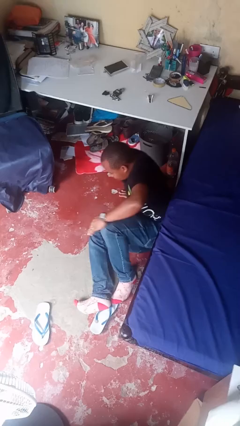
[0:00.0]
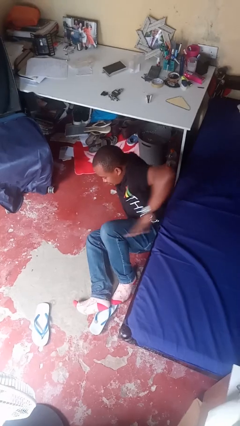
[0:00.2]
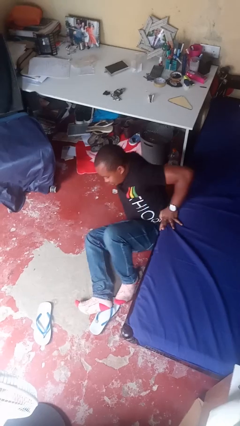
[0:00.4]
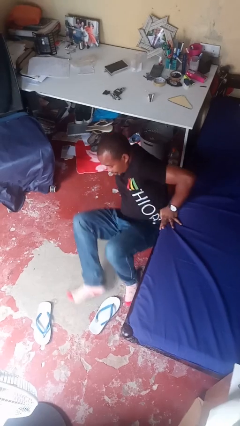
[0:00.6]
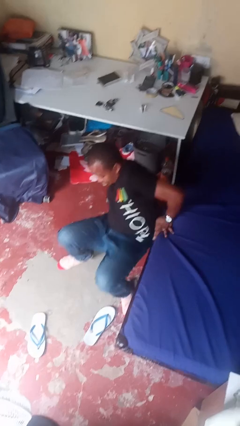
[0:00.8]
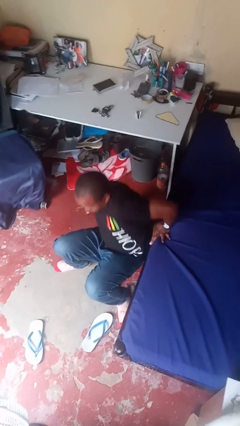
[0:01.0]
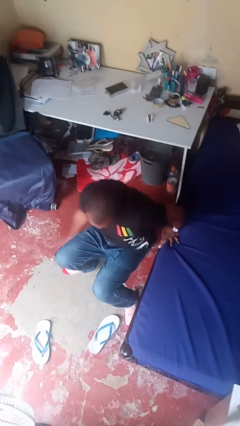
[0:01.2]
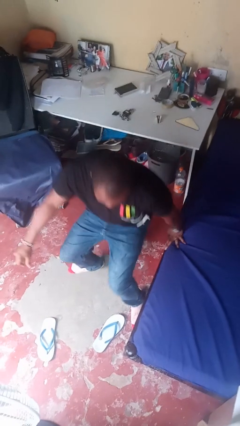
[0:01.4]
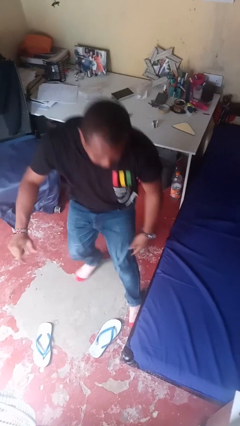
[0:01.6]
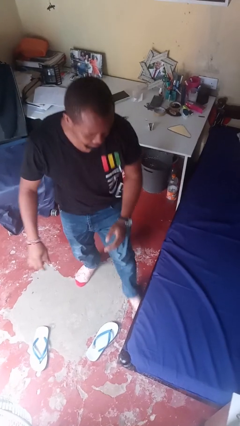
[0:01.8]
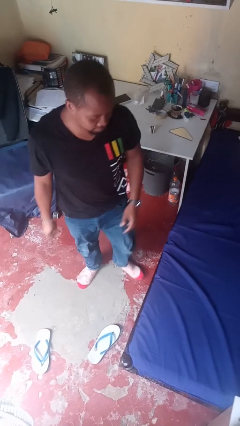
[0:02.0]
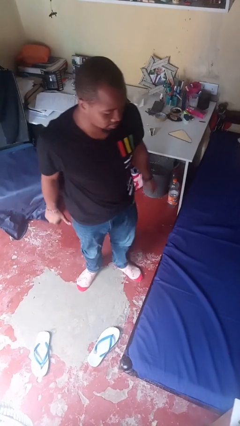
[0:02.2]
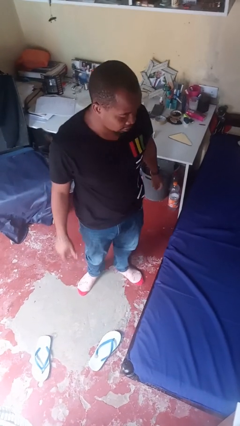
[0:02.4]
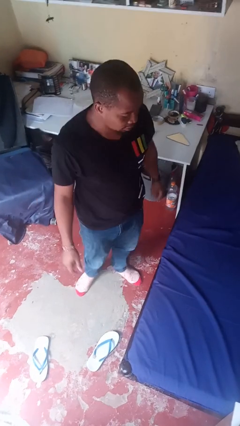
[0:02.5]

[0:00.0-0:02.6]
person stands up from floor

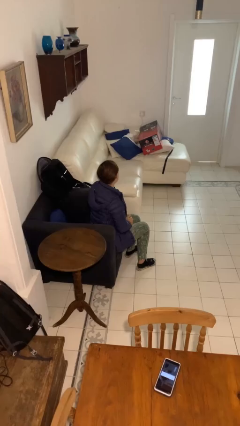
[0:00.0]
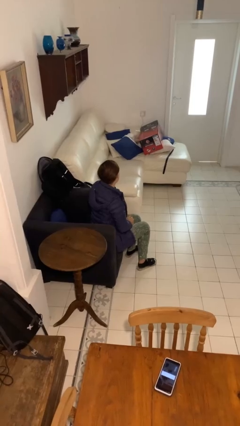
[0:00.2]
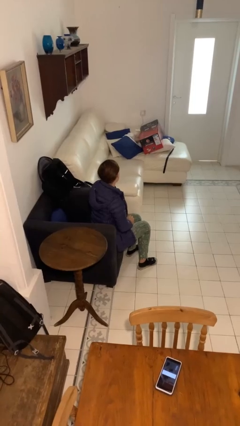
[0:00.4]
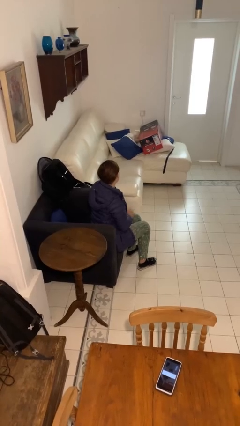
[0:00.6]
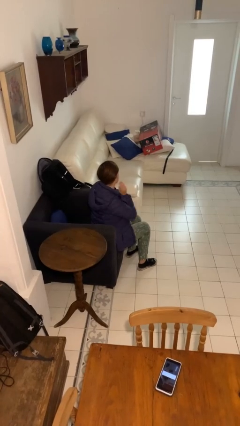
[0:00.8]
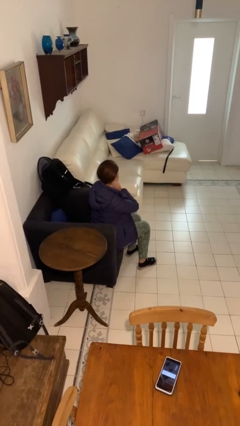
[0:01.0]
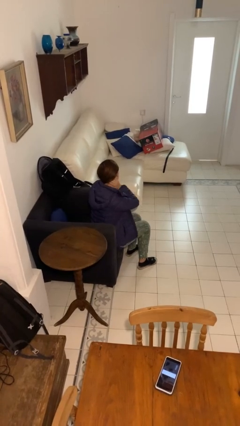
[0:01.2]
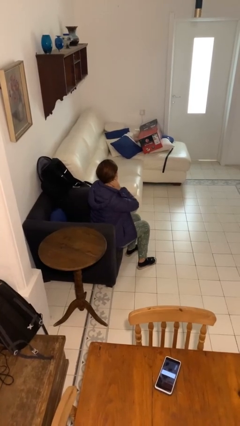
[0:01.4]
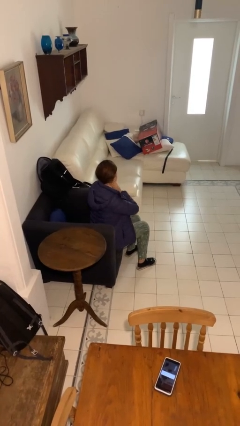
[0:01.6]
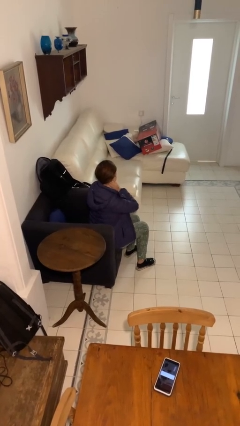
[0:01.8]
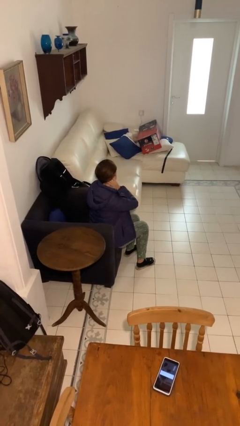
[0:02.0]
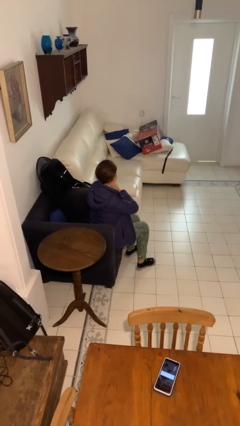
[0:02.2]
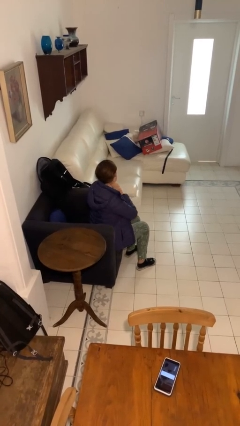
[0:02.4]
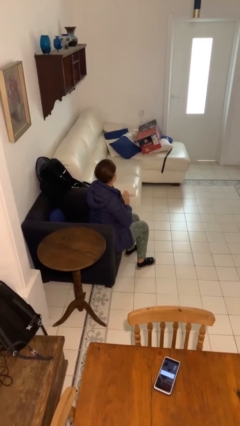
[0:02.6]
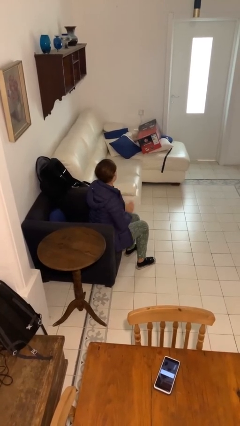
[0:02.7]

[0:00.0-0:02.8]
person rubs neck

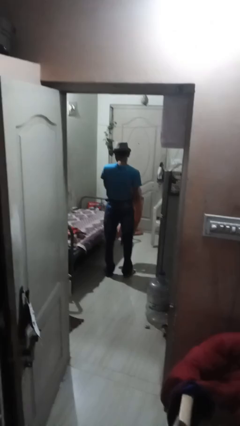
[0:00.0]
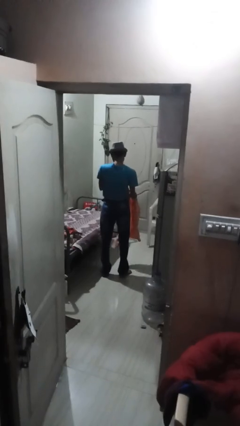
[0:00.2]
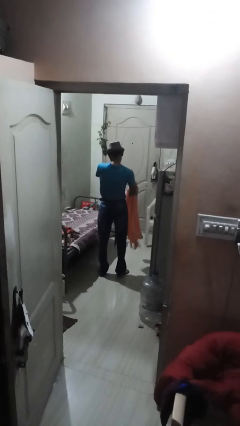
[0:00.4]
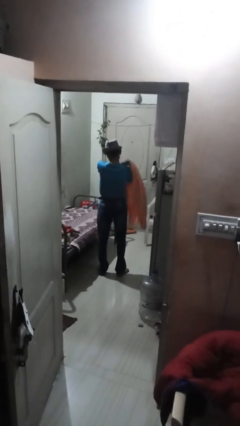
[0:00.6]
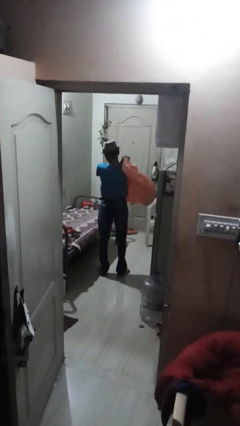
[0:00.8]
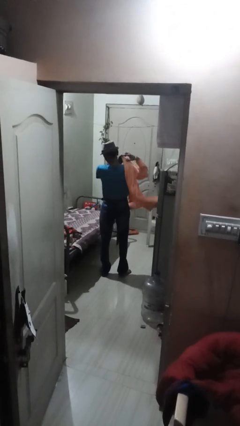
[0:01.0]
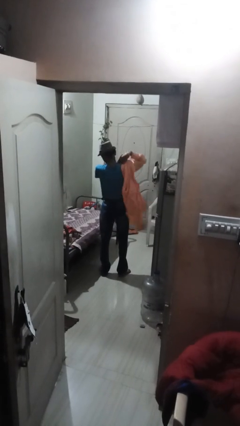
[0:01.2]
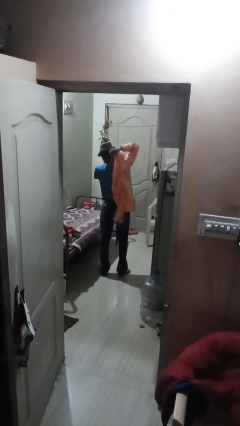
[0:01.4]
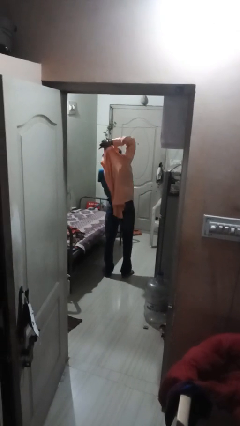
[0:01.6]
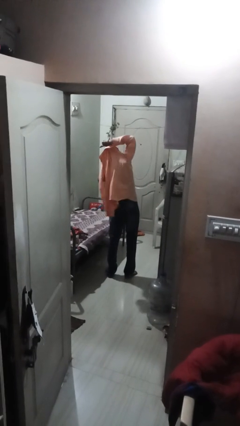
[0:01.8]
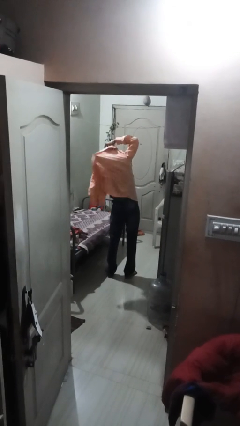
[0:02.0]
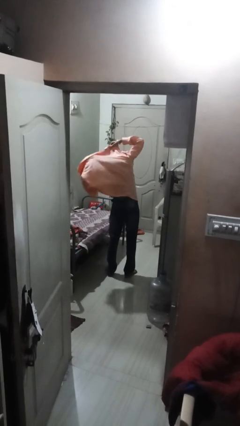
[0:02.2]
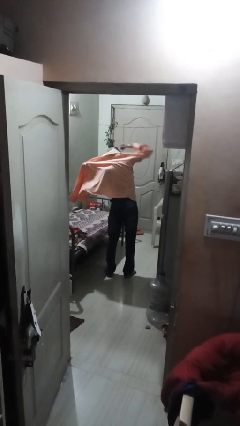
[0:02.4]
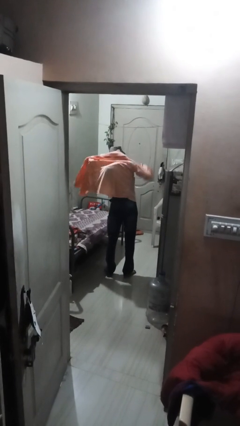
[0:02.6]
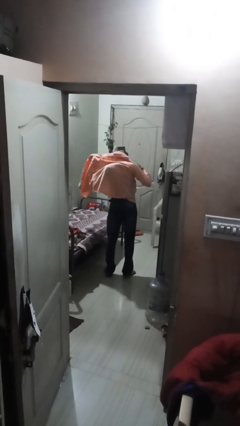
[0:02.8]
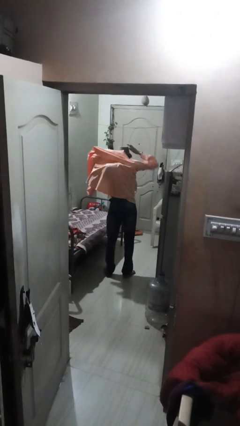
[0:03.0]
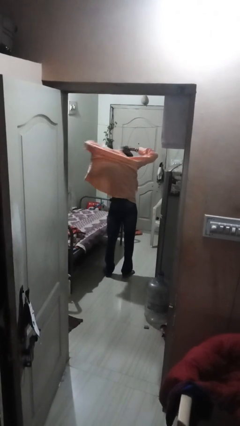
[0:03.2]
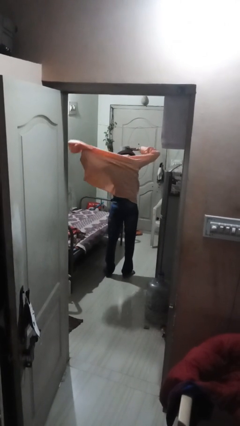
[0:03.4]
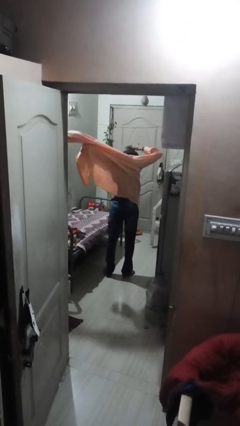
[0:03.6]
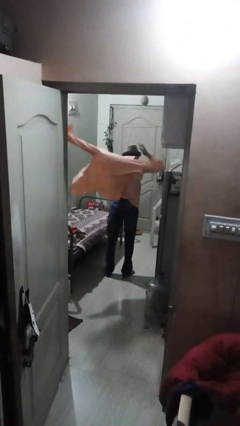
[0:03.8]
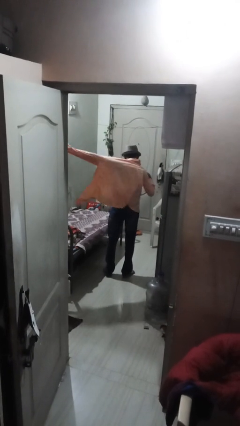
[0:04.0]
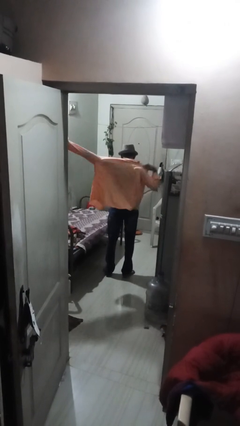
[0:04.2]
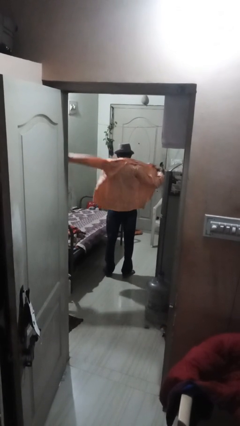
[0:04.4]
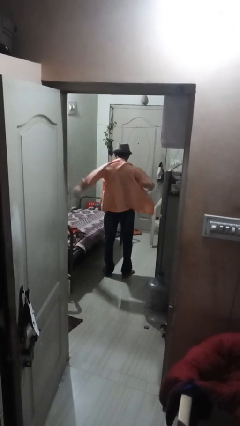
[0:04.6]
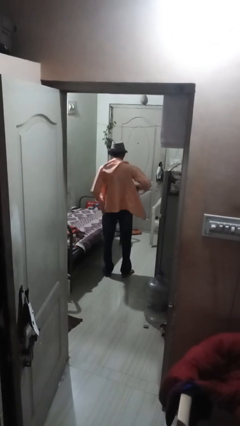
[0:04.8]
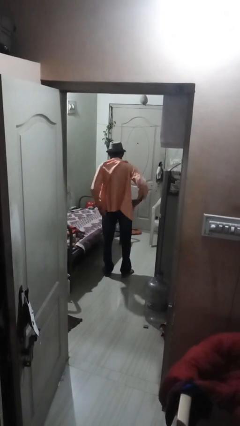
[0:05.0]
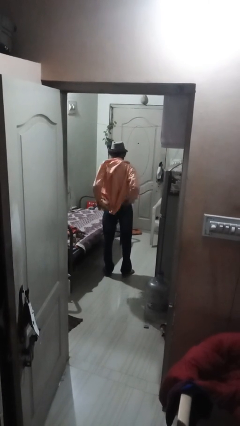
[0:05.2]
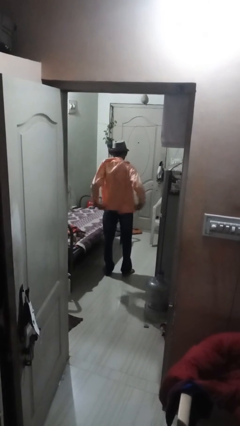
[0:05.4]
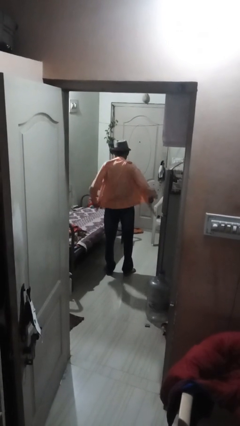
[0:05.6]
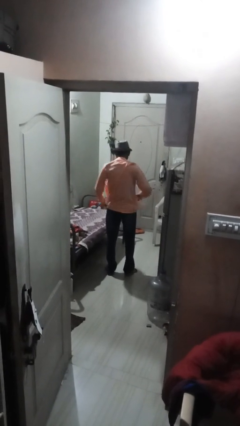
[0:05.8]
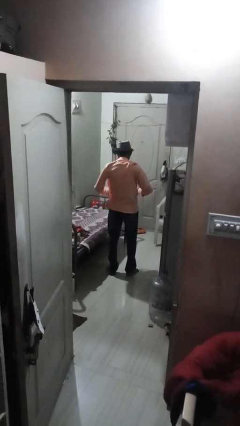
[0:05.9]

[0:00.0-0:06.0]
person puts on shirt

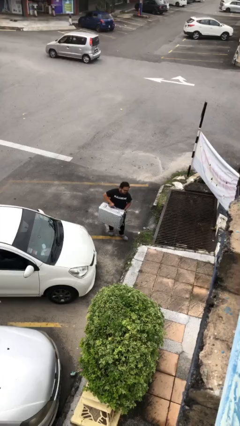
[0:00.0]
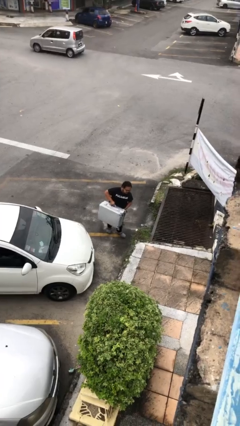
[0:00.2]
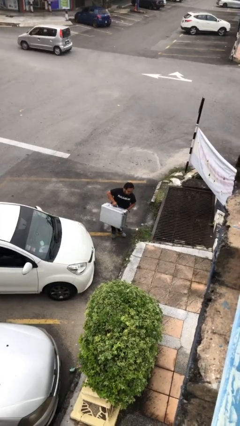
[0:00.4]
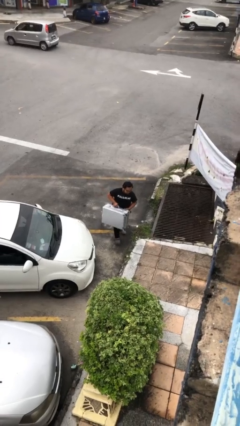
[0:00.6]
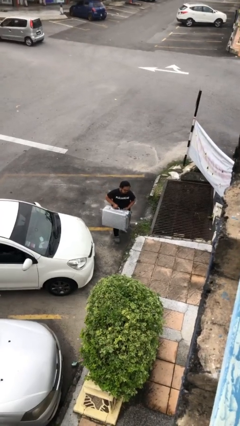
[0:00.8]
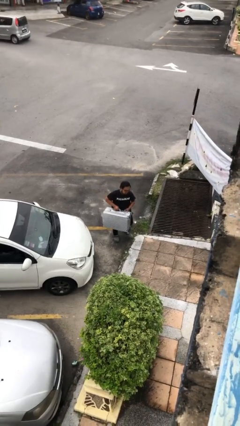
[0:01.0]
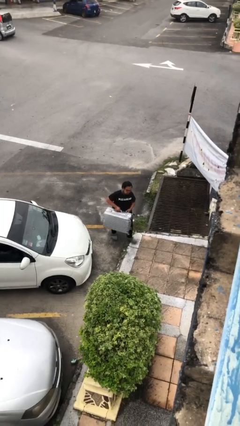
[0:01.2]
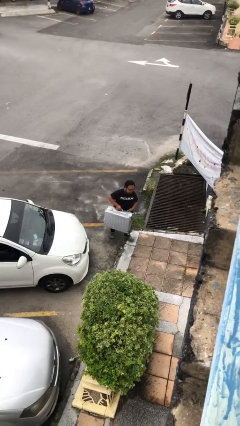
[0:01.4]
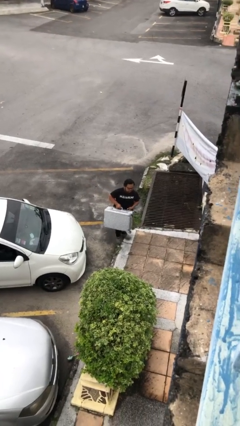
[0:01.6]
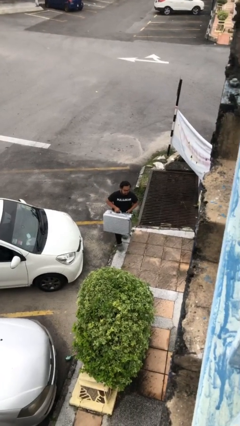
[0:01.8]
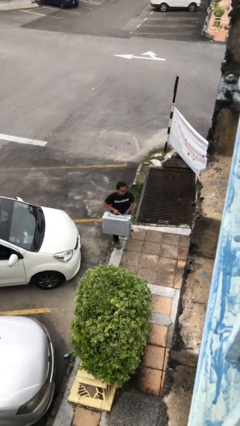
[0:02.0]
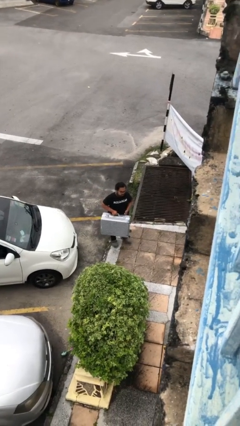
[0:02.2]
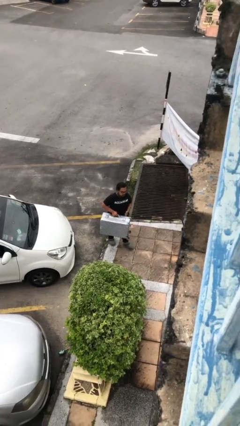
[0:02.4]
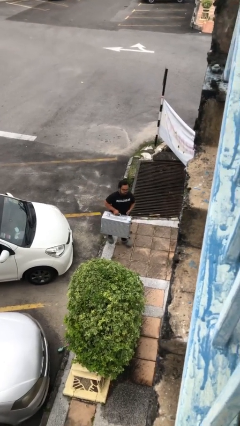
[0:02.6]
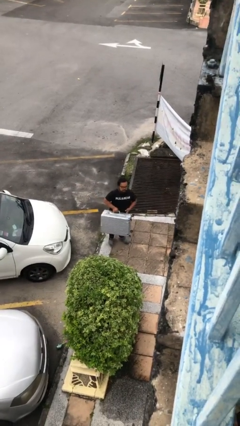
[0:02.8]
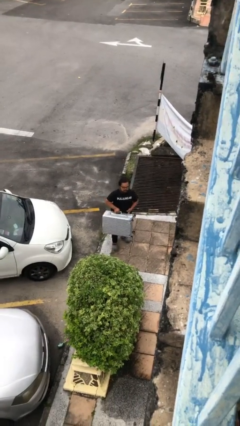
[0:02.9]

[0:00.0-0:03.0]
person carries heavy object

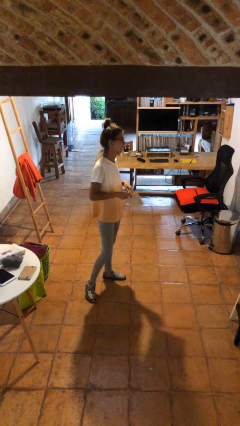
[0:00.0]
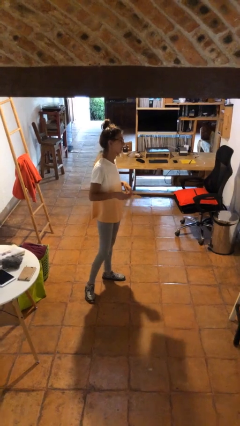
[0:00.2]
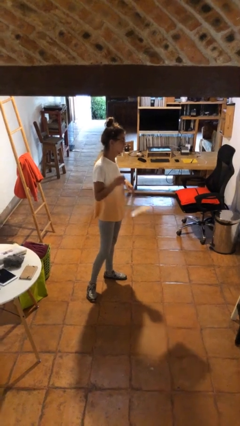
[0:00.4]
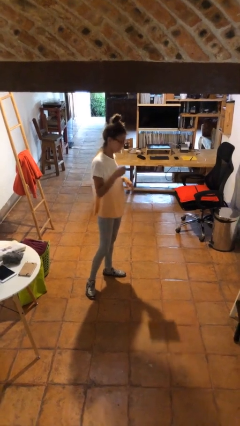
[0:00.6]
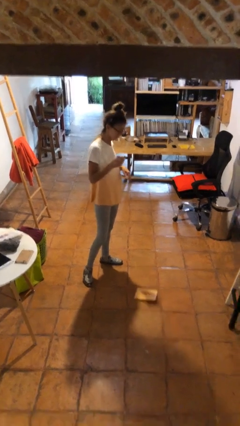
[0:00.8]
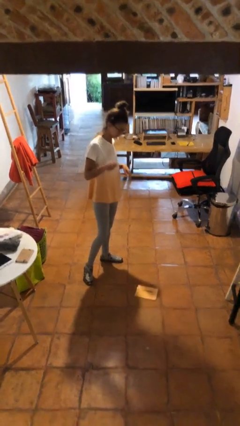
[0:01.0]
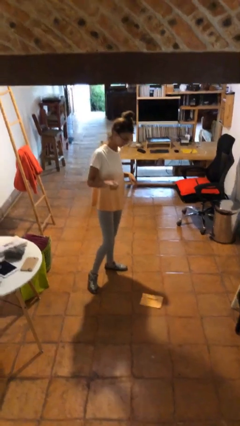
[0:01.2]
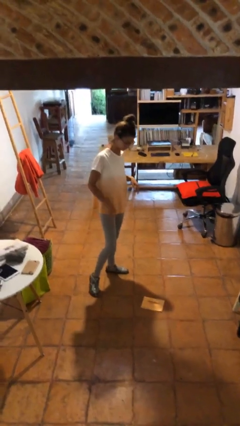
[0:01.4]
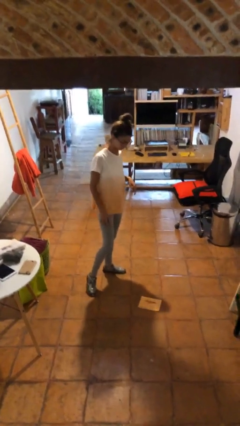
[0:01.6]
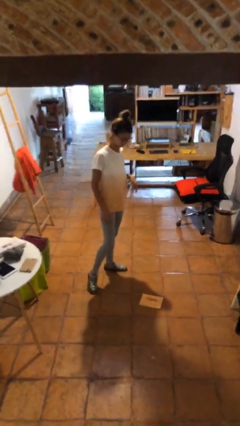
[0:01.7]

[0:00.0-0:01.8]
person drops object

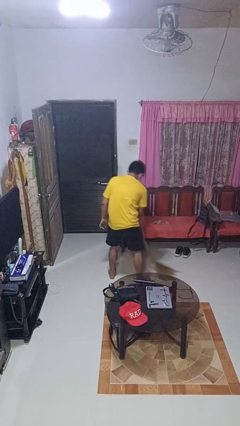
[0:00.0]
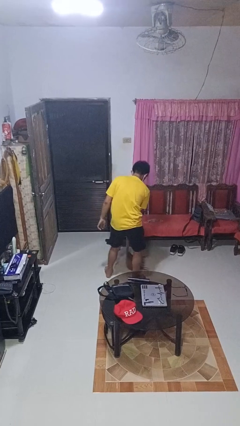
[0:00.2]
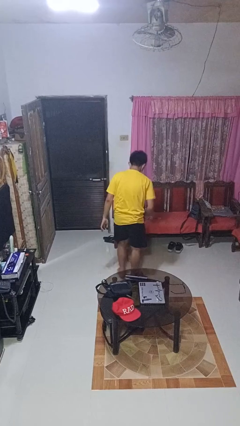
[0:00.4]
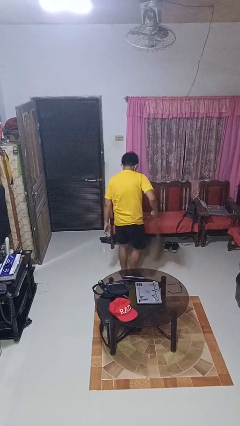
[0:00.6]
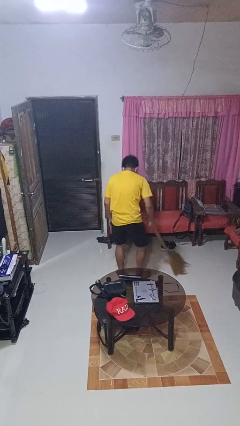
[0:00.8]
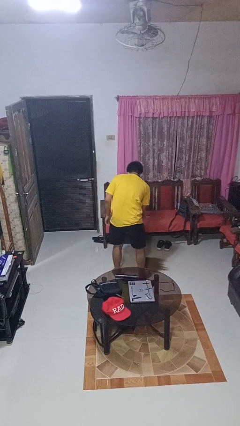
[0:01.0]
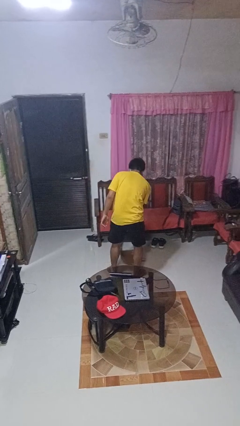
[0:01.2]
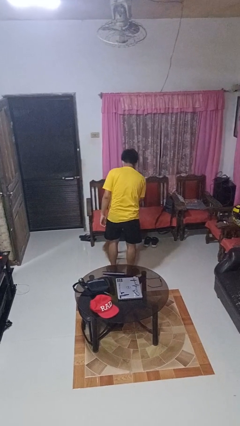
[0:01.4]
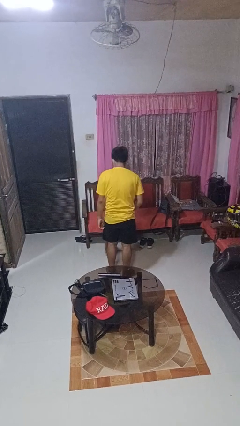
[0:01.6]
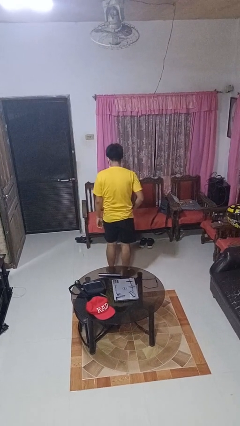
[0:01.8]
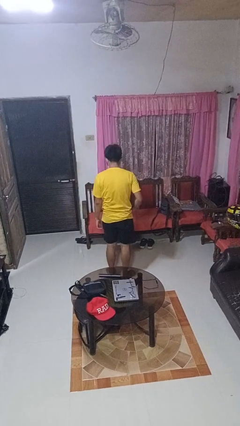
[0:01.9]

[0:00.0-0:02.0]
person sweeps floor
